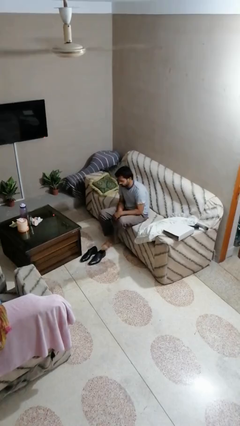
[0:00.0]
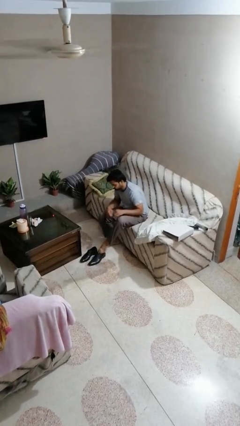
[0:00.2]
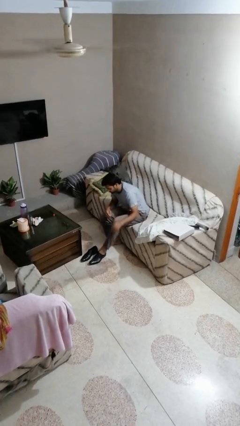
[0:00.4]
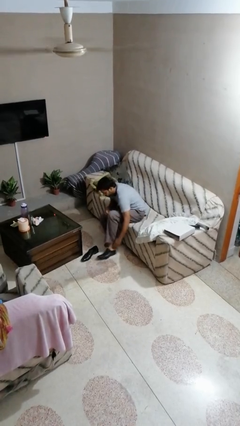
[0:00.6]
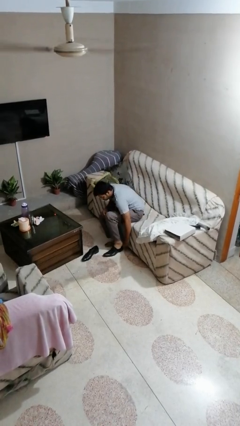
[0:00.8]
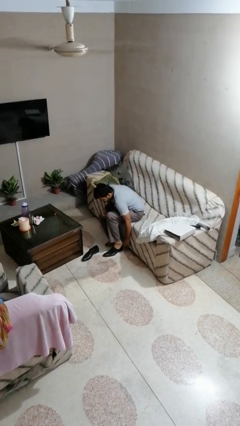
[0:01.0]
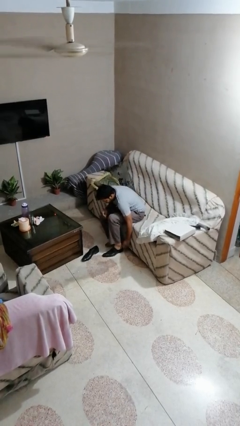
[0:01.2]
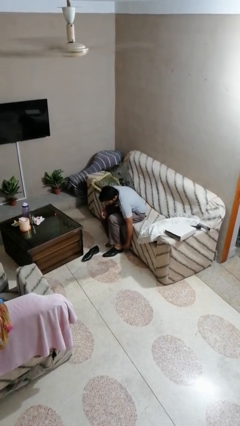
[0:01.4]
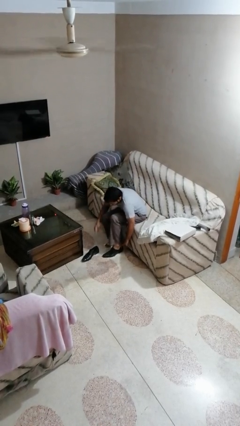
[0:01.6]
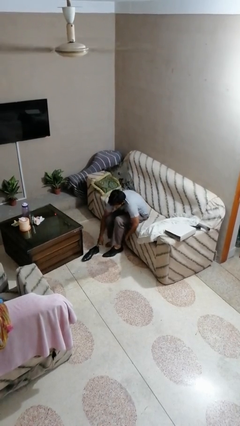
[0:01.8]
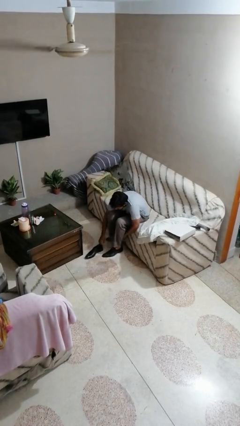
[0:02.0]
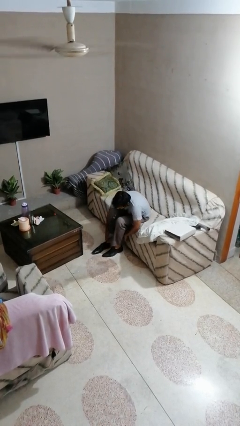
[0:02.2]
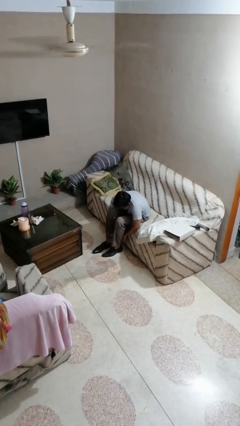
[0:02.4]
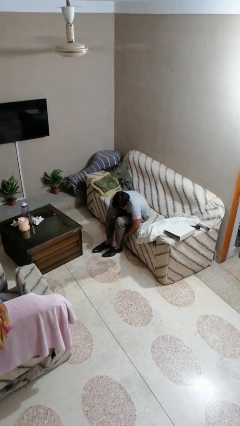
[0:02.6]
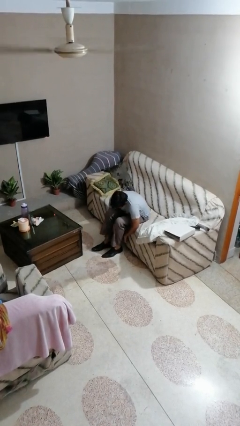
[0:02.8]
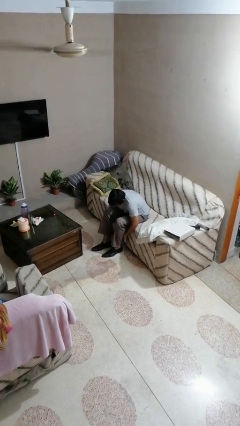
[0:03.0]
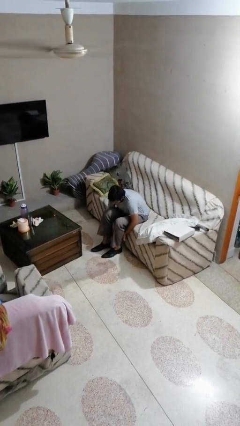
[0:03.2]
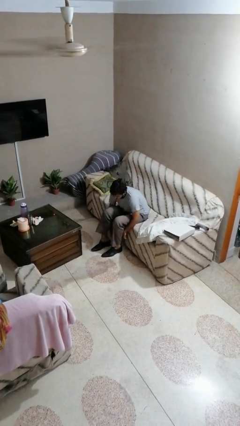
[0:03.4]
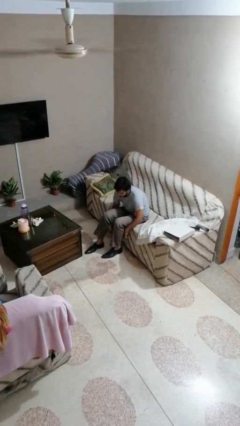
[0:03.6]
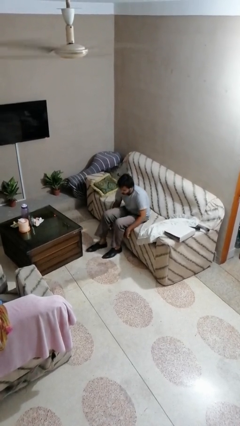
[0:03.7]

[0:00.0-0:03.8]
person puts on shoes

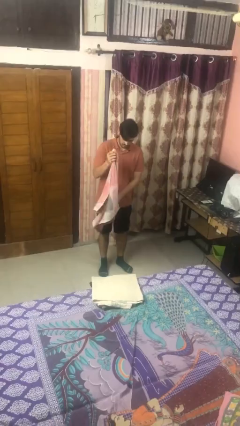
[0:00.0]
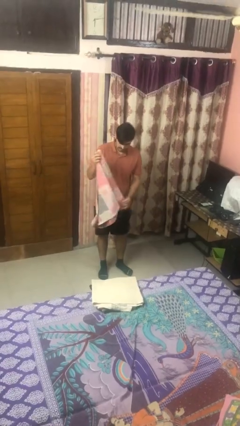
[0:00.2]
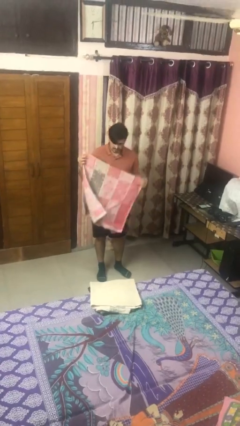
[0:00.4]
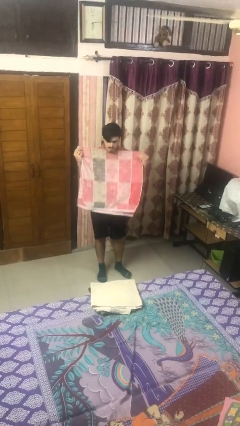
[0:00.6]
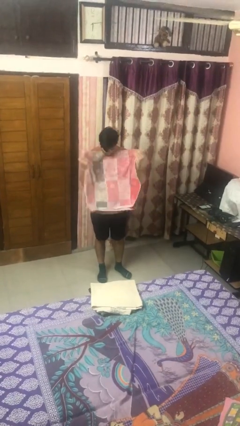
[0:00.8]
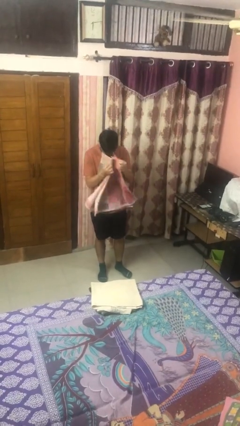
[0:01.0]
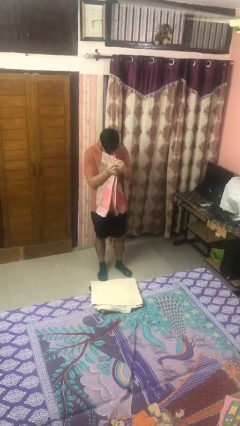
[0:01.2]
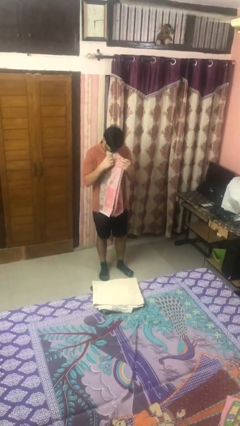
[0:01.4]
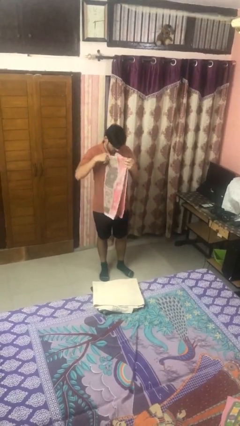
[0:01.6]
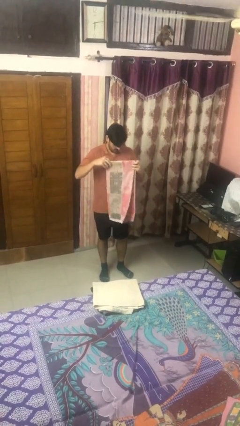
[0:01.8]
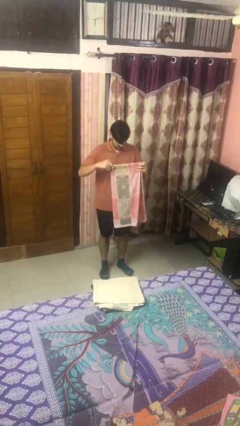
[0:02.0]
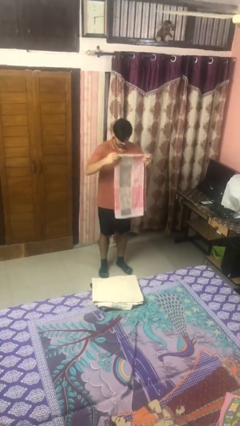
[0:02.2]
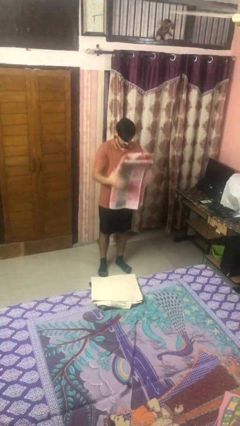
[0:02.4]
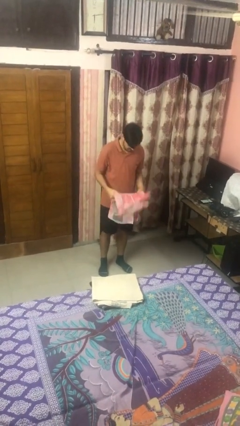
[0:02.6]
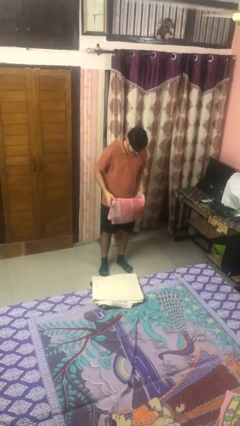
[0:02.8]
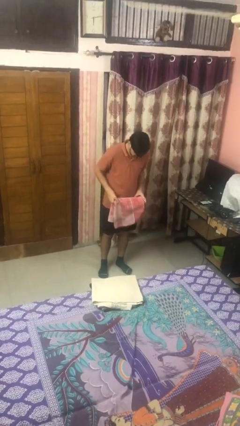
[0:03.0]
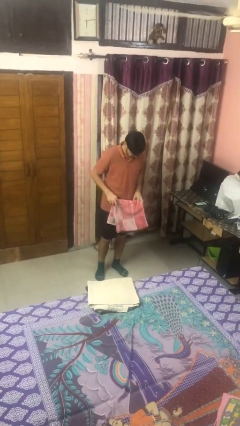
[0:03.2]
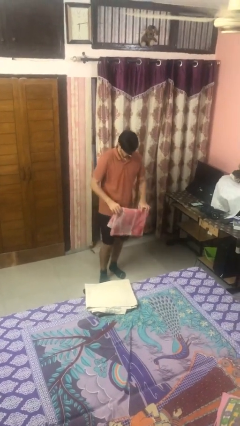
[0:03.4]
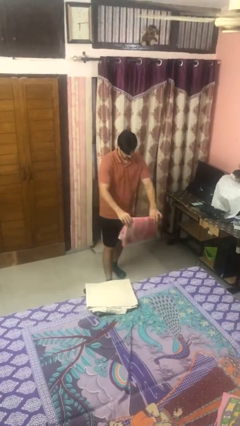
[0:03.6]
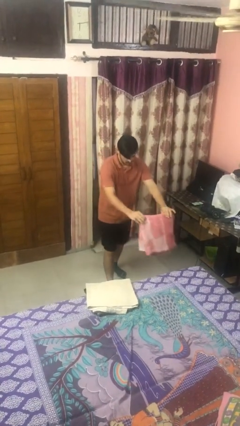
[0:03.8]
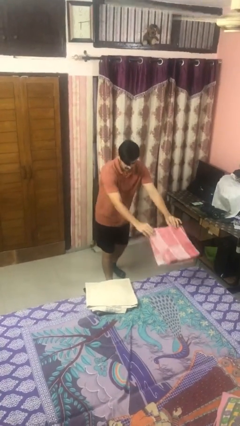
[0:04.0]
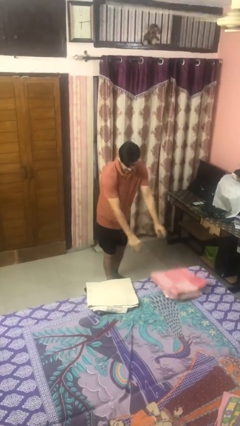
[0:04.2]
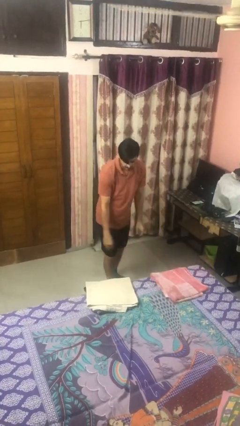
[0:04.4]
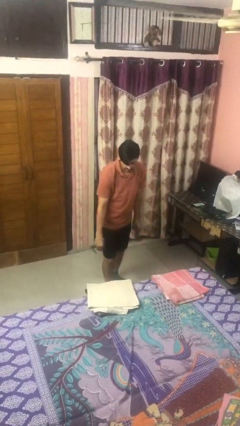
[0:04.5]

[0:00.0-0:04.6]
person folds towel

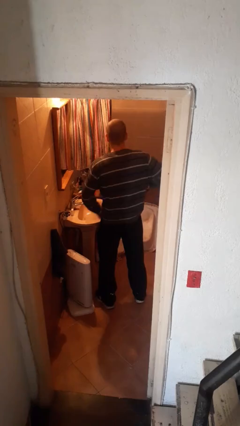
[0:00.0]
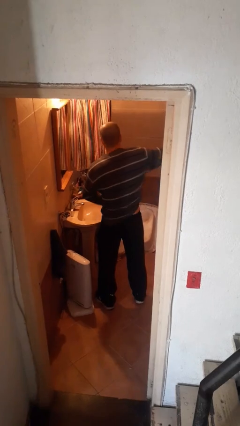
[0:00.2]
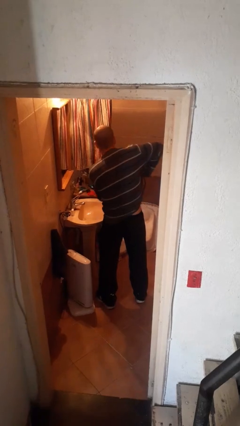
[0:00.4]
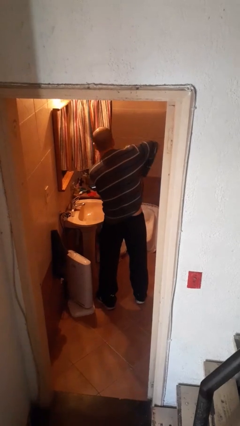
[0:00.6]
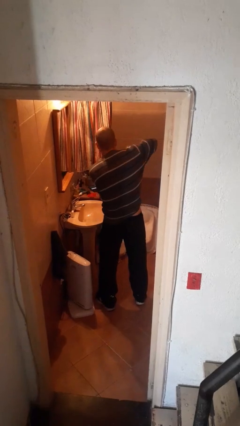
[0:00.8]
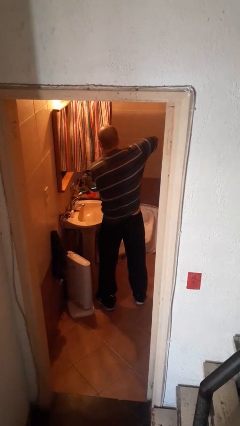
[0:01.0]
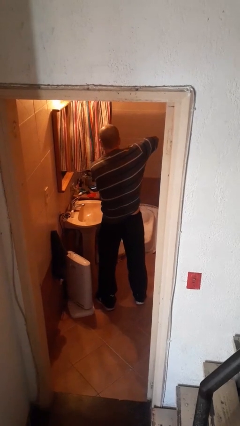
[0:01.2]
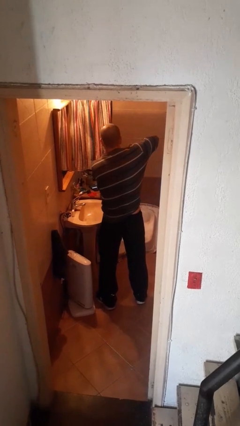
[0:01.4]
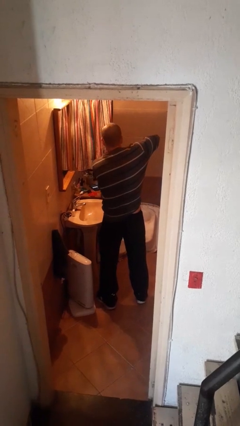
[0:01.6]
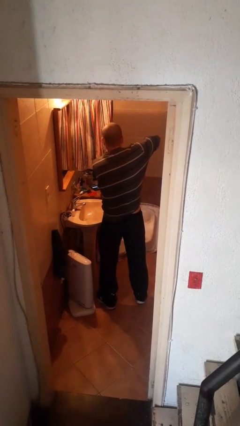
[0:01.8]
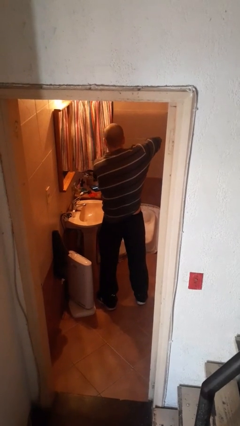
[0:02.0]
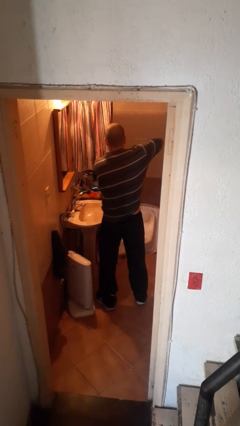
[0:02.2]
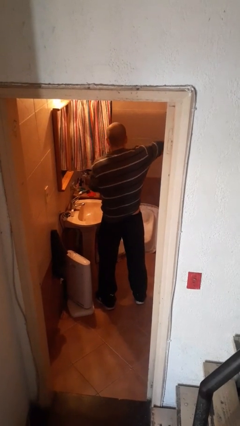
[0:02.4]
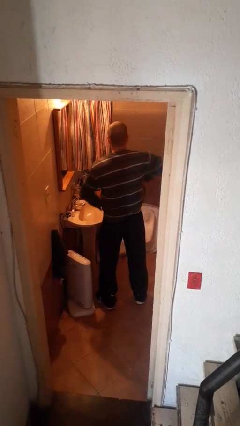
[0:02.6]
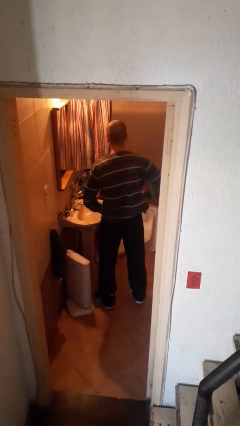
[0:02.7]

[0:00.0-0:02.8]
person applies deodorant

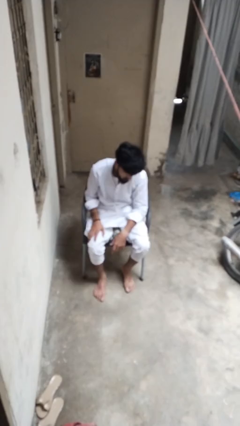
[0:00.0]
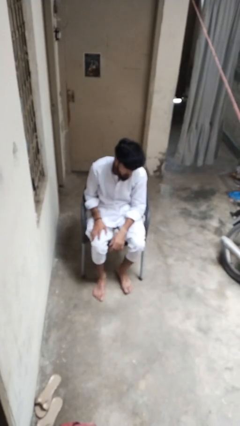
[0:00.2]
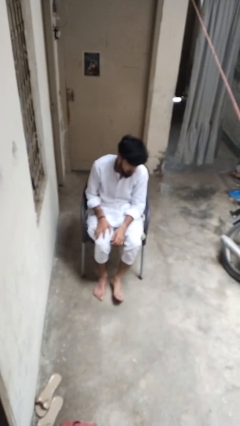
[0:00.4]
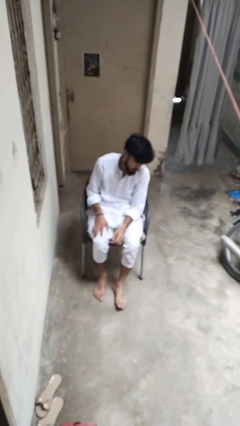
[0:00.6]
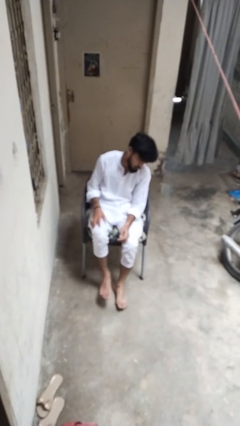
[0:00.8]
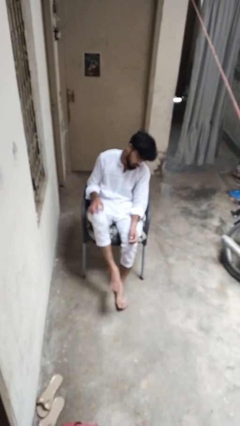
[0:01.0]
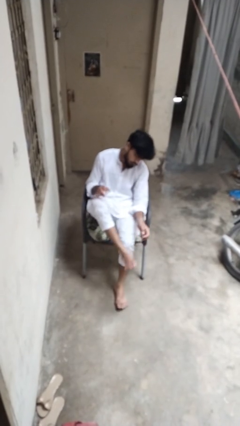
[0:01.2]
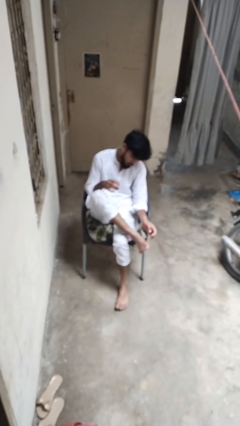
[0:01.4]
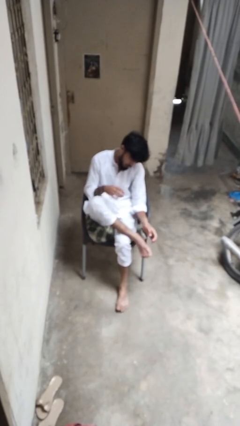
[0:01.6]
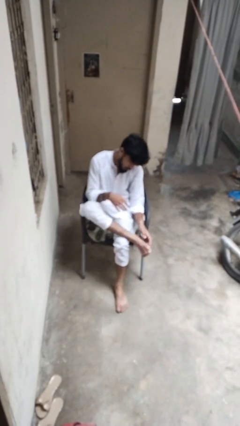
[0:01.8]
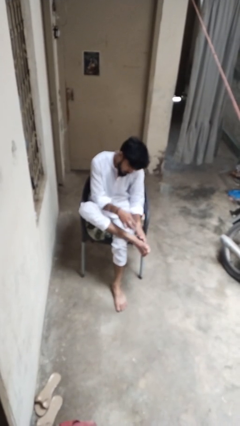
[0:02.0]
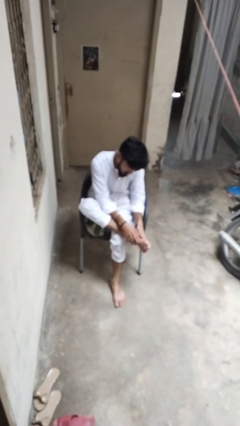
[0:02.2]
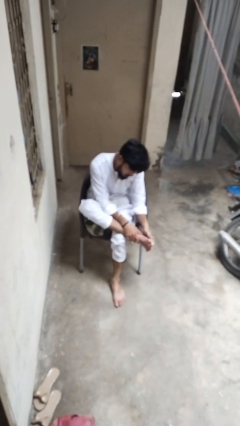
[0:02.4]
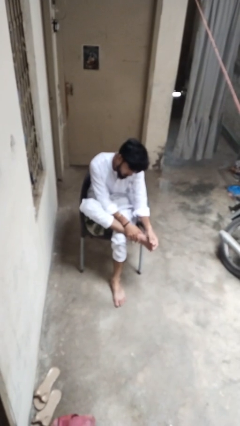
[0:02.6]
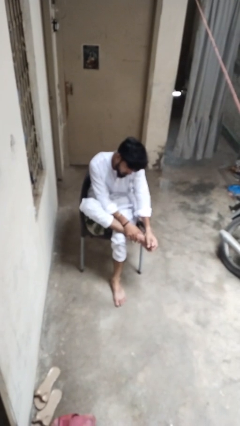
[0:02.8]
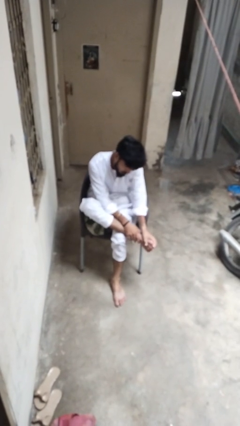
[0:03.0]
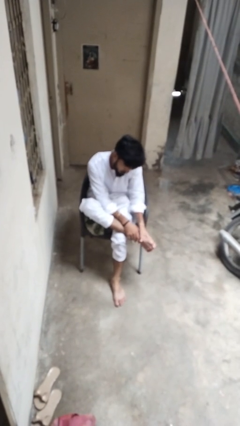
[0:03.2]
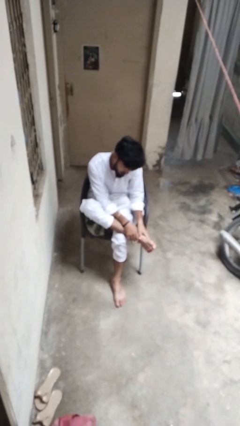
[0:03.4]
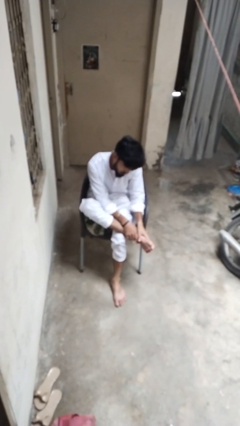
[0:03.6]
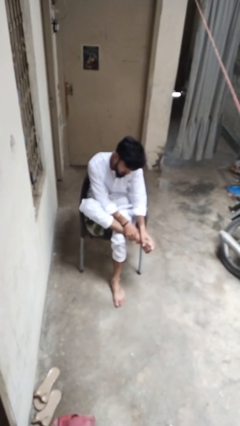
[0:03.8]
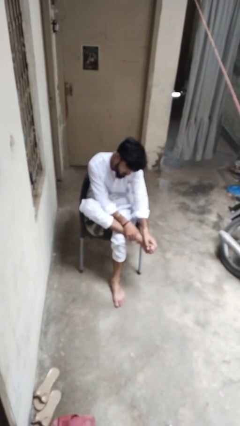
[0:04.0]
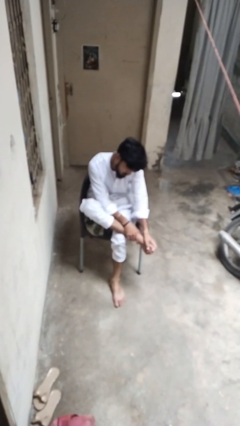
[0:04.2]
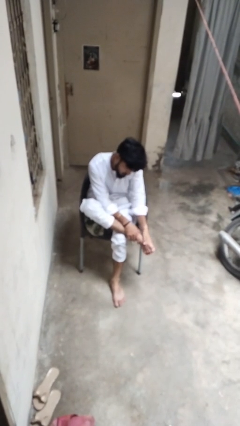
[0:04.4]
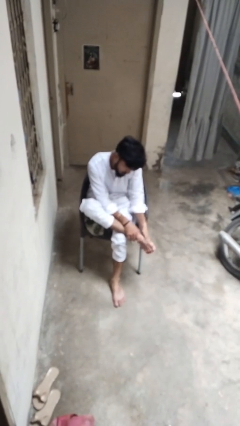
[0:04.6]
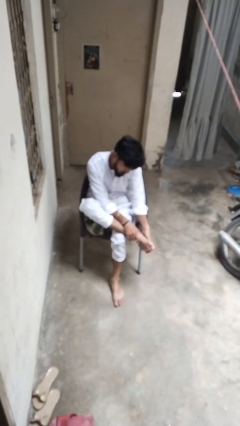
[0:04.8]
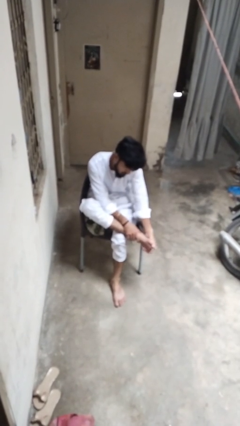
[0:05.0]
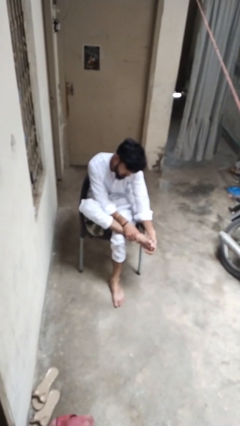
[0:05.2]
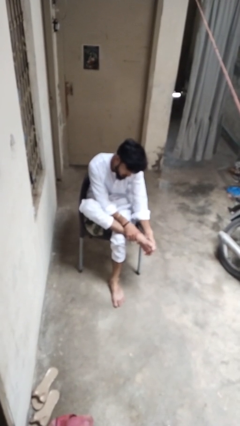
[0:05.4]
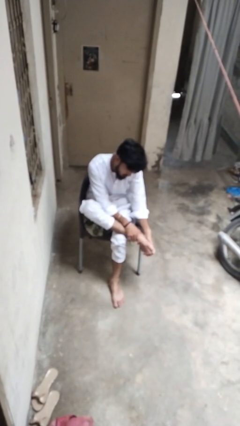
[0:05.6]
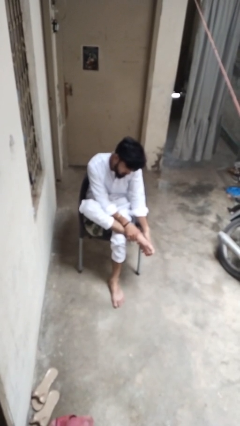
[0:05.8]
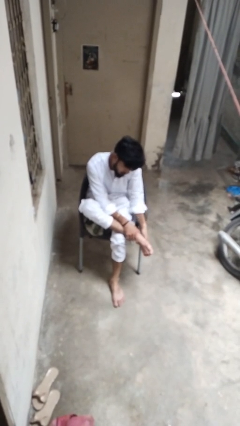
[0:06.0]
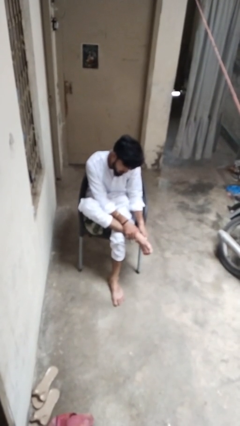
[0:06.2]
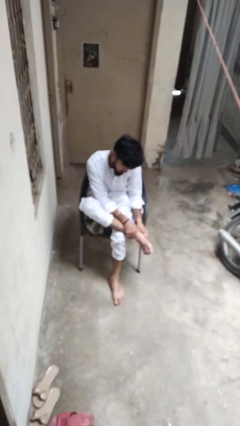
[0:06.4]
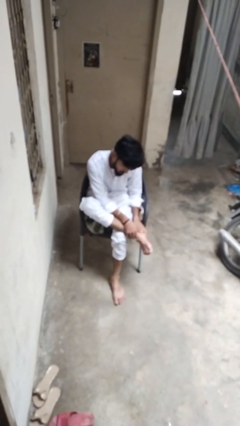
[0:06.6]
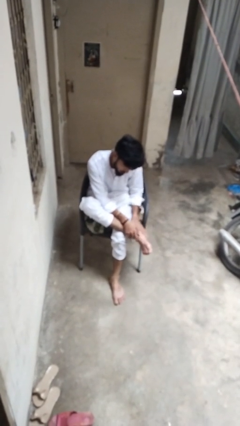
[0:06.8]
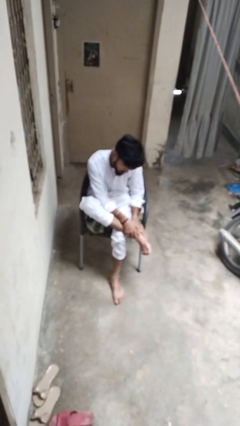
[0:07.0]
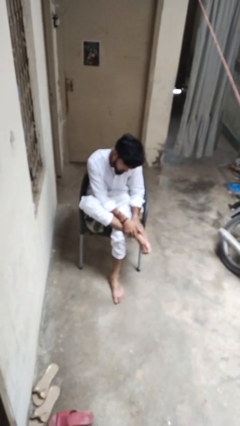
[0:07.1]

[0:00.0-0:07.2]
person rubs foot
